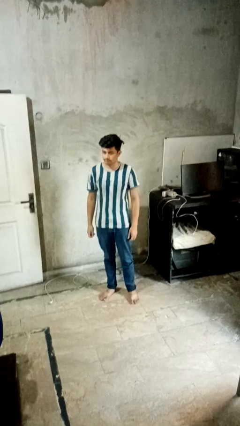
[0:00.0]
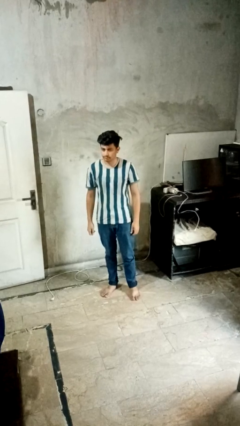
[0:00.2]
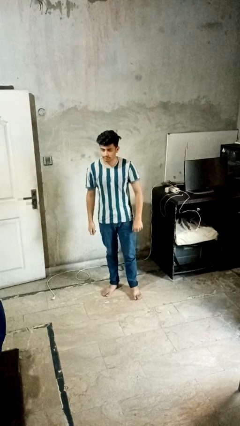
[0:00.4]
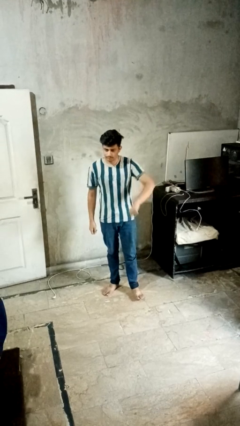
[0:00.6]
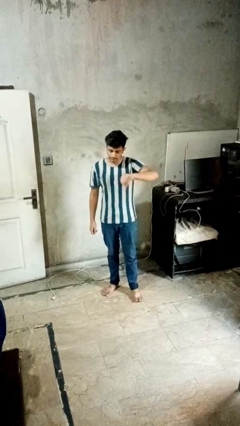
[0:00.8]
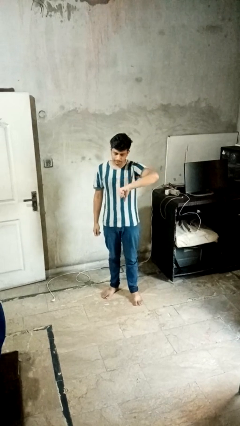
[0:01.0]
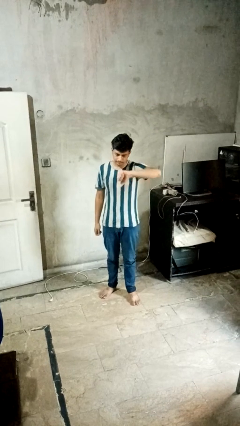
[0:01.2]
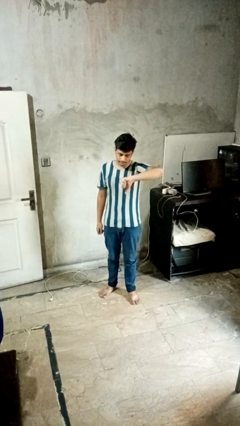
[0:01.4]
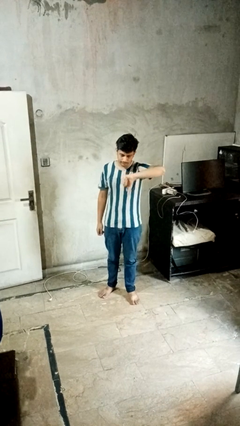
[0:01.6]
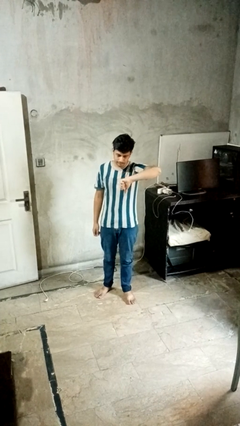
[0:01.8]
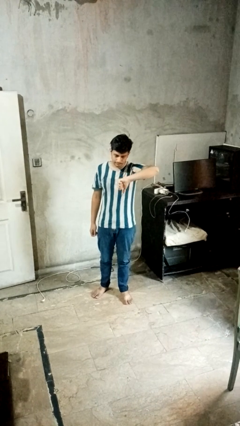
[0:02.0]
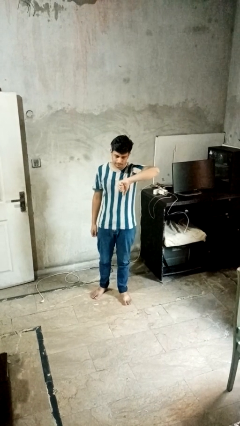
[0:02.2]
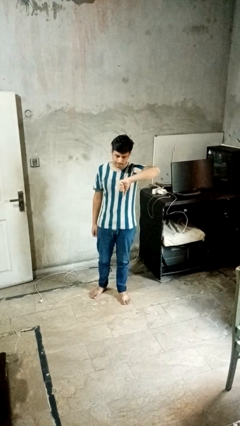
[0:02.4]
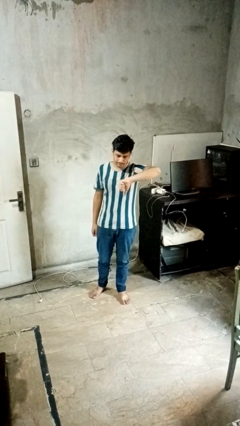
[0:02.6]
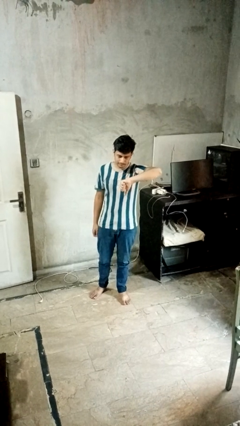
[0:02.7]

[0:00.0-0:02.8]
person gestures thumbs down

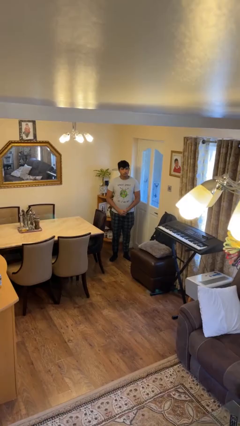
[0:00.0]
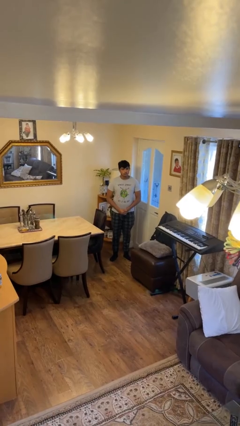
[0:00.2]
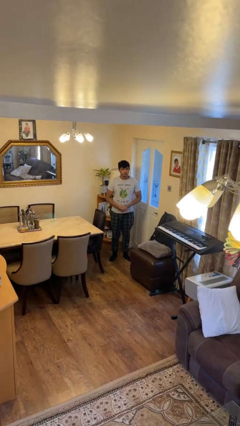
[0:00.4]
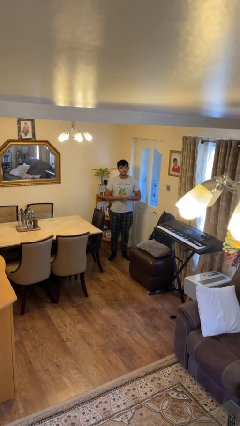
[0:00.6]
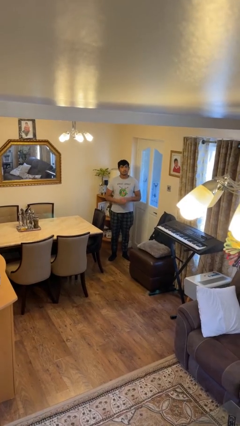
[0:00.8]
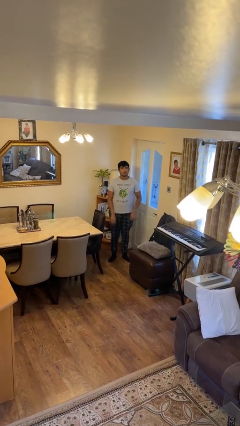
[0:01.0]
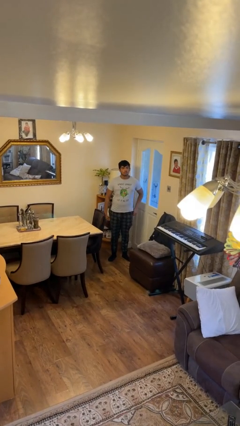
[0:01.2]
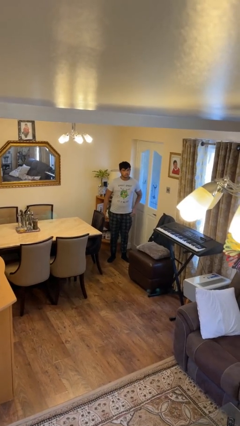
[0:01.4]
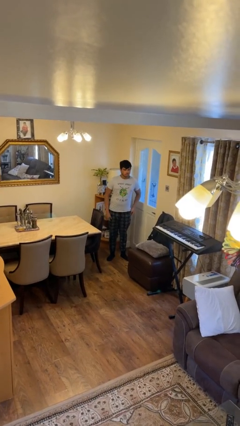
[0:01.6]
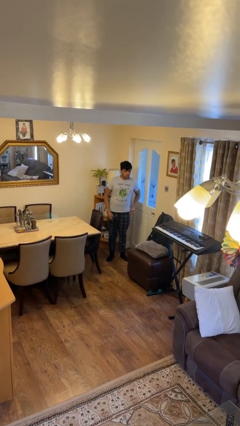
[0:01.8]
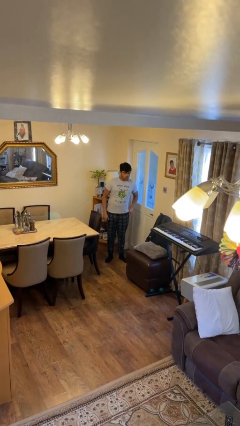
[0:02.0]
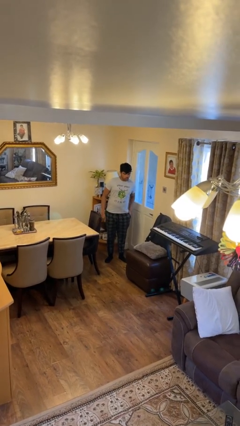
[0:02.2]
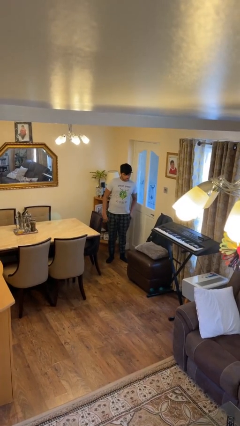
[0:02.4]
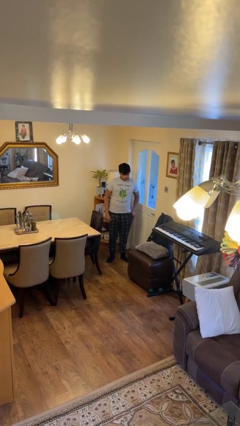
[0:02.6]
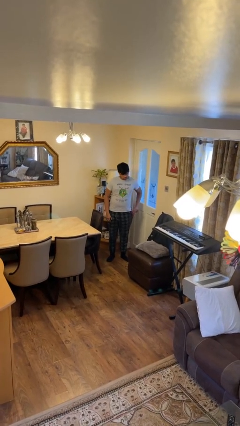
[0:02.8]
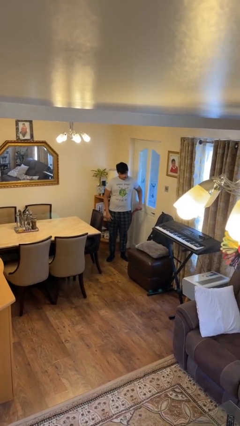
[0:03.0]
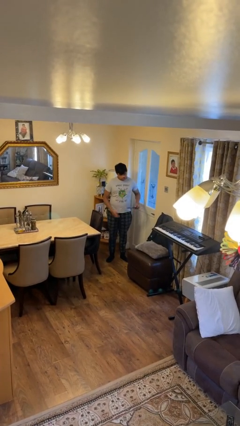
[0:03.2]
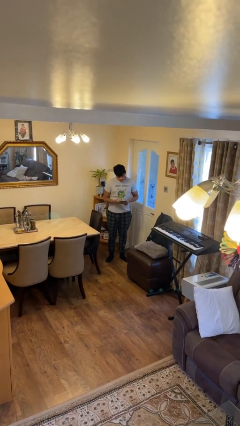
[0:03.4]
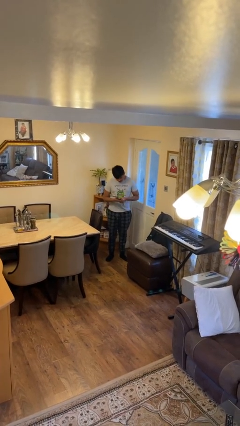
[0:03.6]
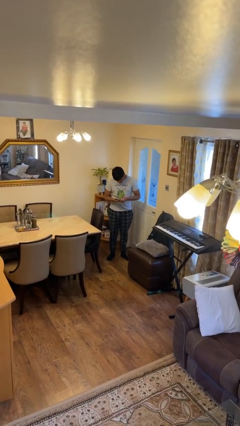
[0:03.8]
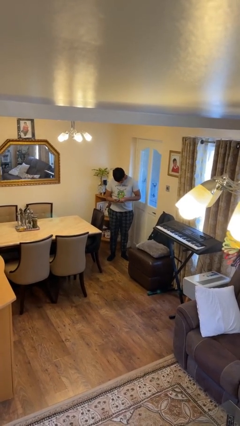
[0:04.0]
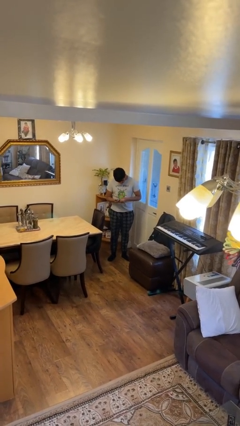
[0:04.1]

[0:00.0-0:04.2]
person takes phone from pocket

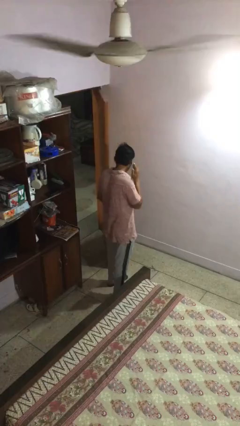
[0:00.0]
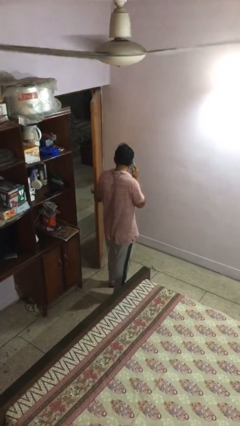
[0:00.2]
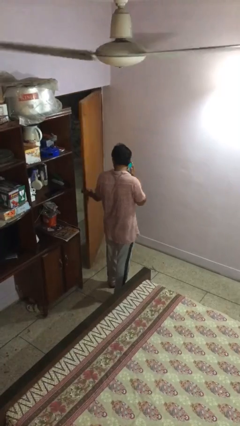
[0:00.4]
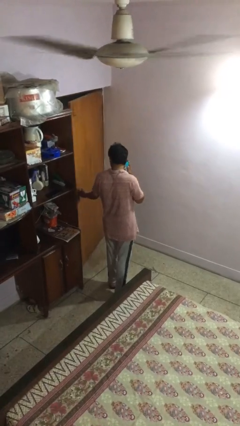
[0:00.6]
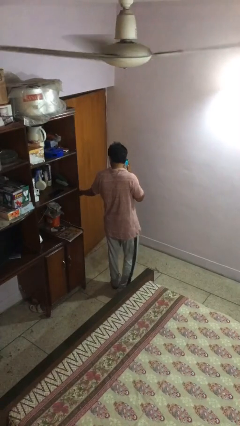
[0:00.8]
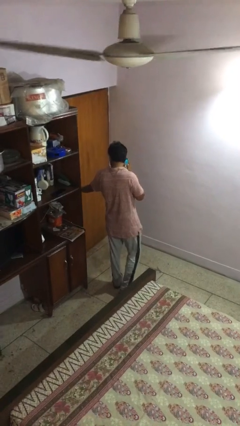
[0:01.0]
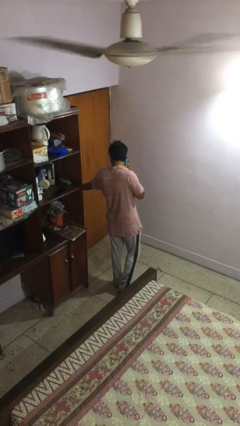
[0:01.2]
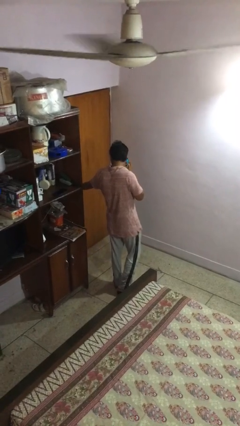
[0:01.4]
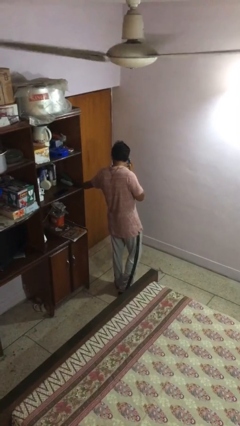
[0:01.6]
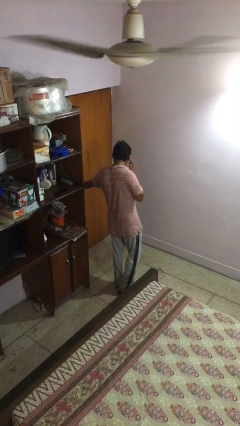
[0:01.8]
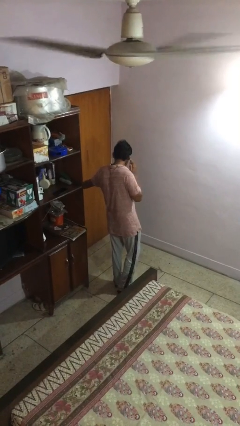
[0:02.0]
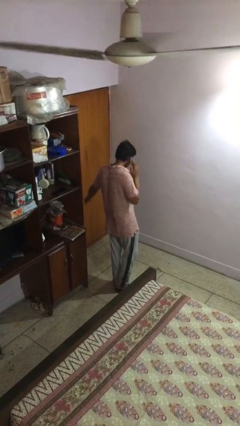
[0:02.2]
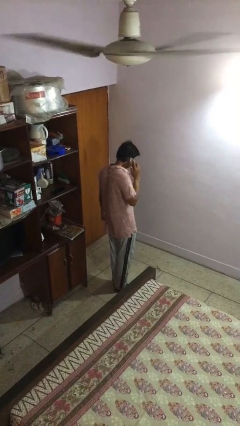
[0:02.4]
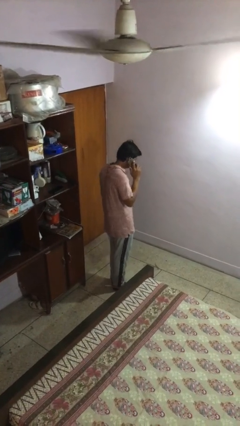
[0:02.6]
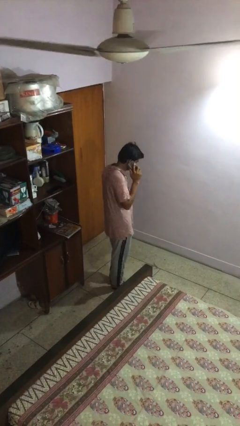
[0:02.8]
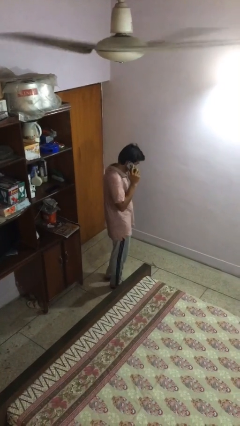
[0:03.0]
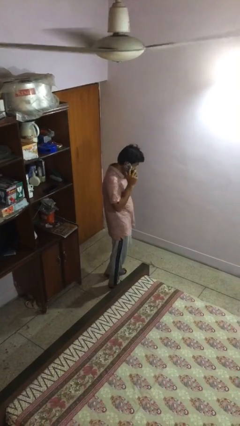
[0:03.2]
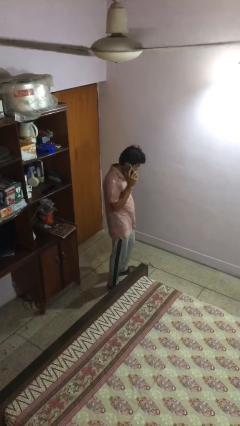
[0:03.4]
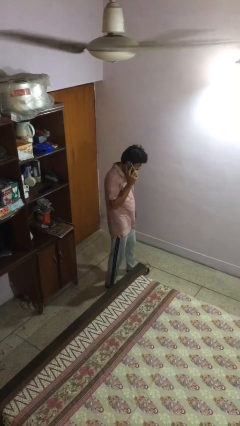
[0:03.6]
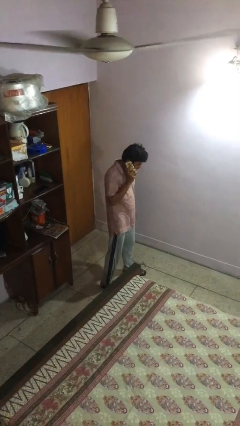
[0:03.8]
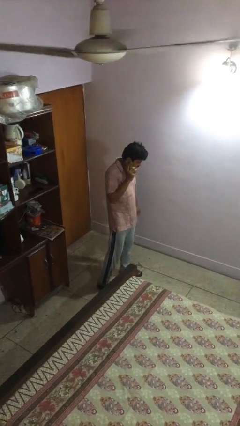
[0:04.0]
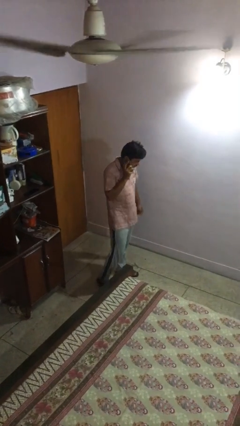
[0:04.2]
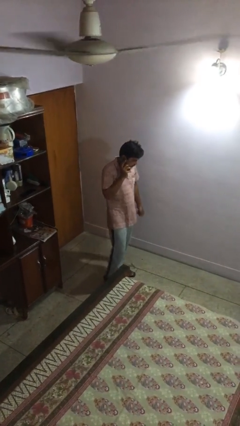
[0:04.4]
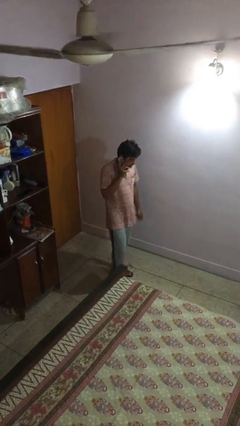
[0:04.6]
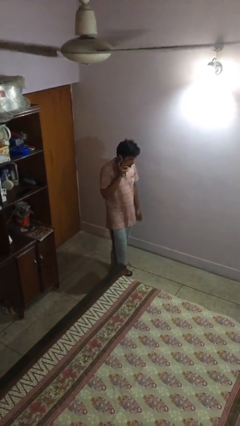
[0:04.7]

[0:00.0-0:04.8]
person closes facility door

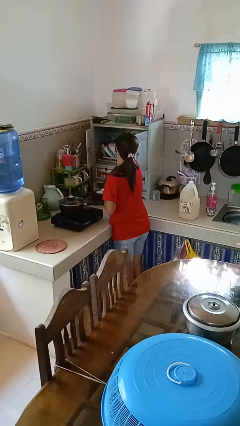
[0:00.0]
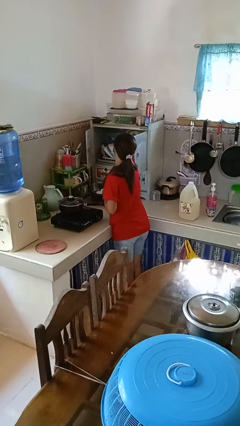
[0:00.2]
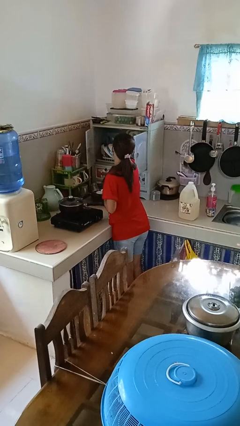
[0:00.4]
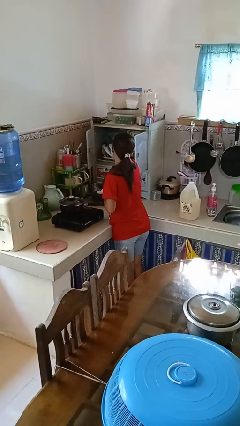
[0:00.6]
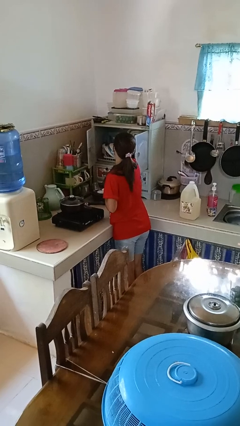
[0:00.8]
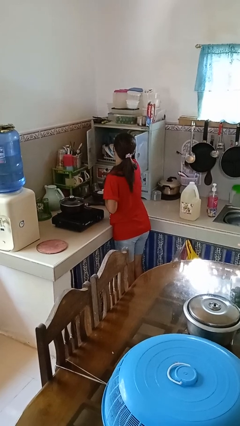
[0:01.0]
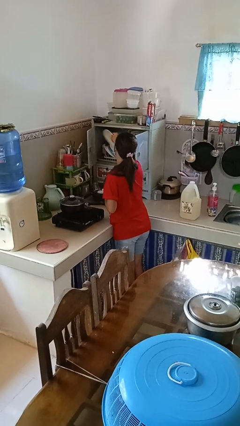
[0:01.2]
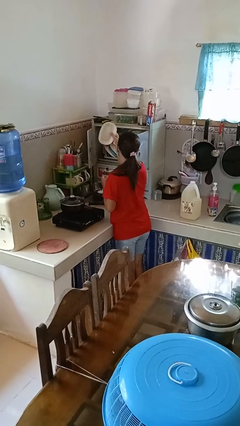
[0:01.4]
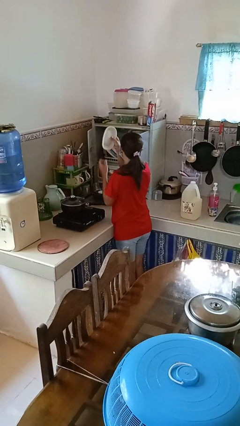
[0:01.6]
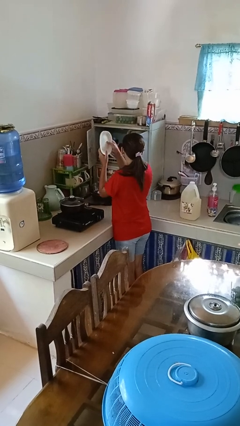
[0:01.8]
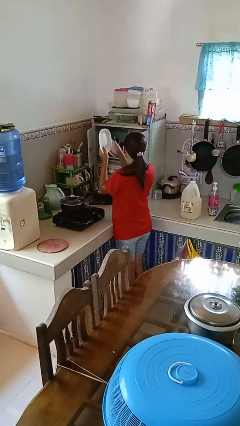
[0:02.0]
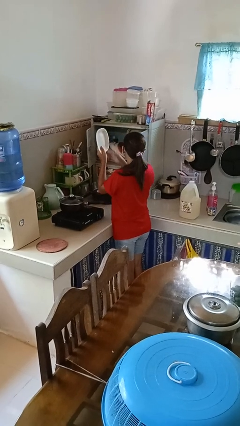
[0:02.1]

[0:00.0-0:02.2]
person takes object from cabinet

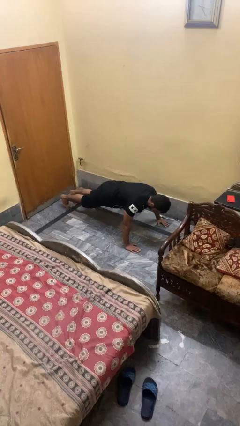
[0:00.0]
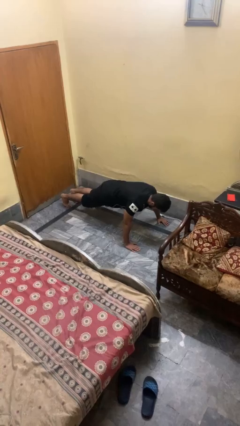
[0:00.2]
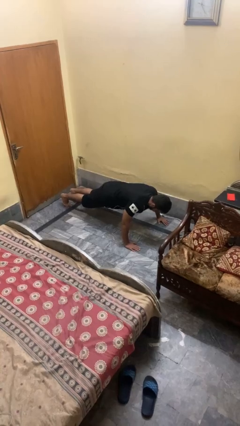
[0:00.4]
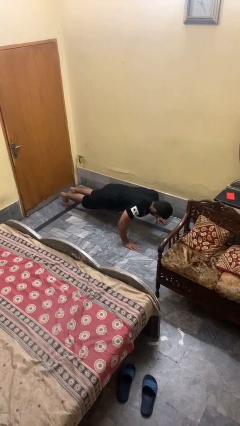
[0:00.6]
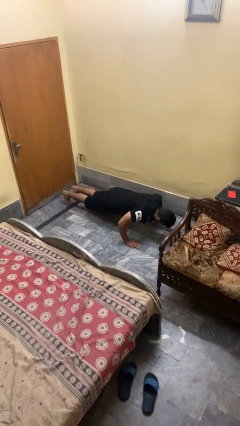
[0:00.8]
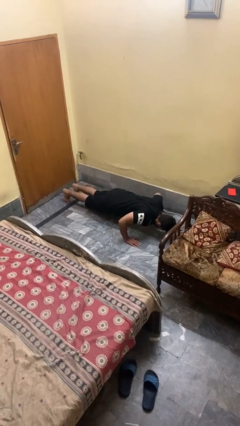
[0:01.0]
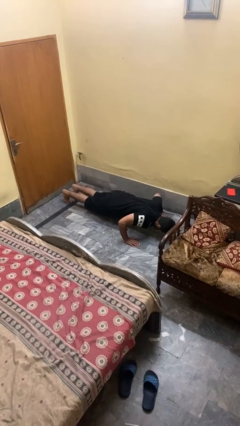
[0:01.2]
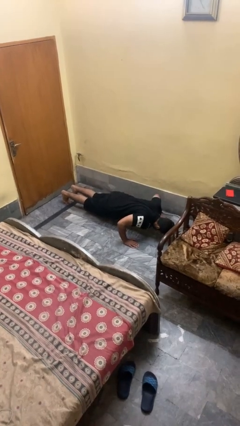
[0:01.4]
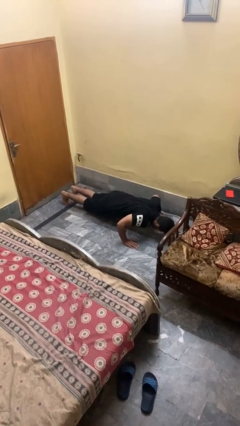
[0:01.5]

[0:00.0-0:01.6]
person exercises with pushup

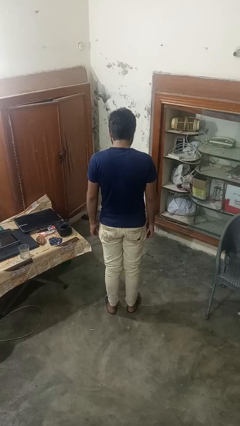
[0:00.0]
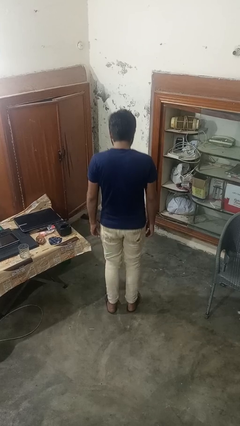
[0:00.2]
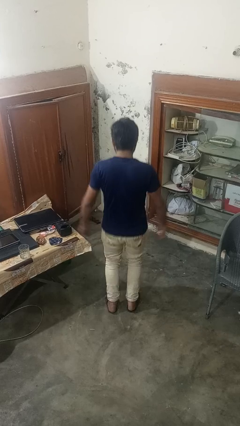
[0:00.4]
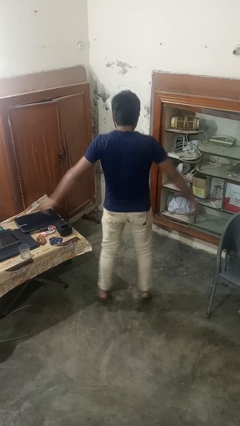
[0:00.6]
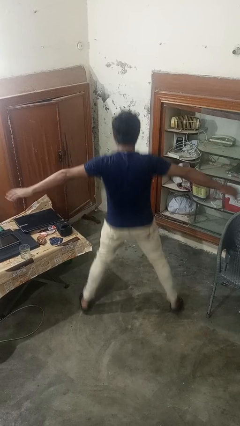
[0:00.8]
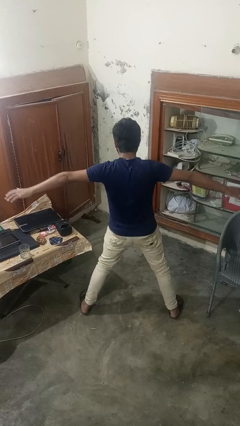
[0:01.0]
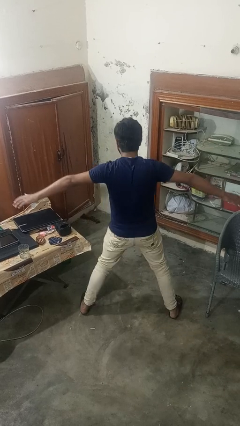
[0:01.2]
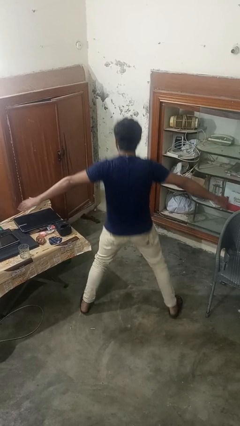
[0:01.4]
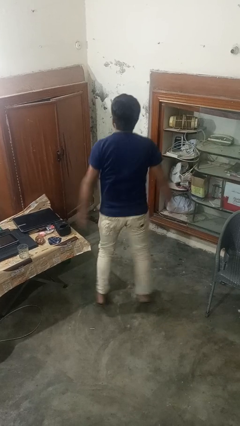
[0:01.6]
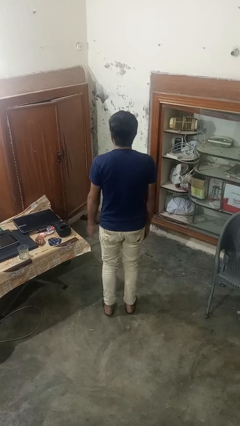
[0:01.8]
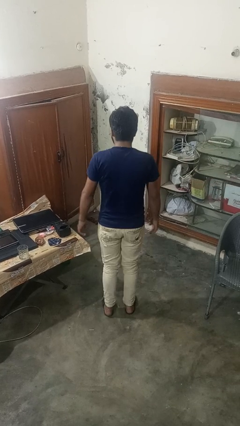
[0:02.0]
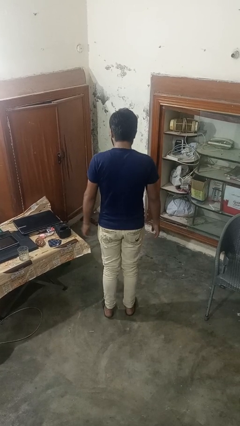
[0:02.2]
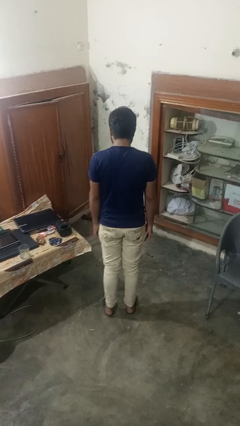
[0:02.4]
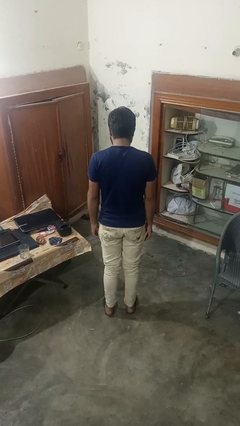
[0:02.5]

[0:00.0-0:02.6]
person exercises with jumping jacks
